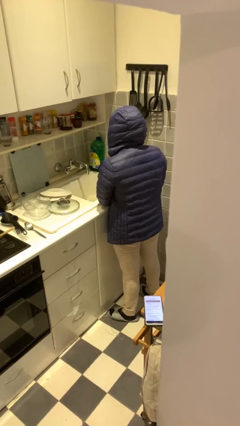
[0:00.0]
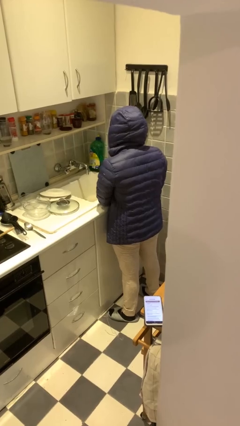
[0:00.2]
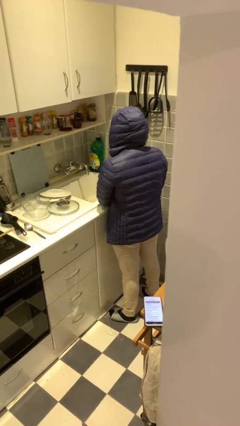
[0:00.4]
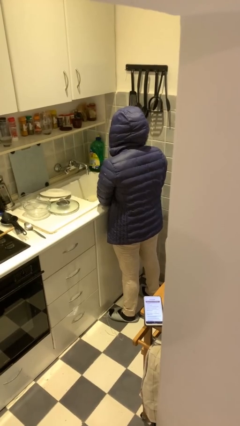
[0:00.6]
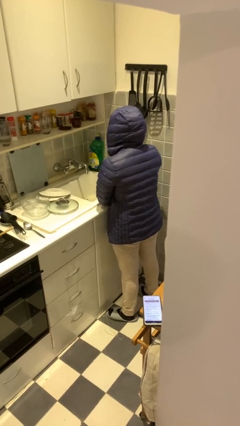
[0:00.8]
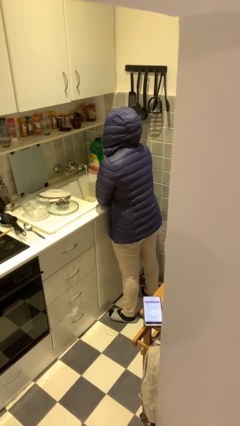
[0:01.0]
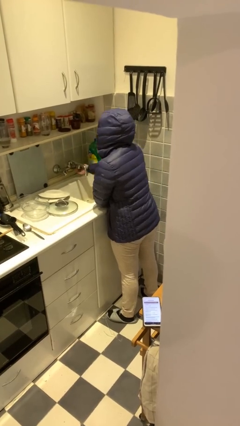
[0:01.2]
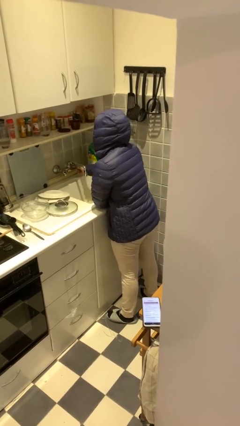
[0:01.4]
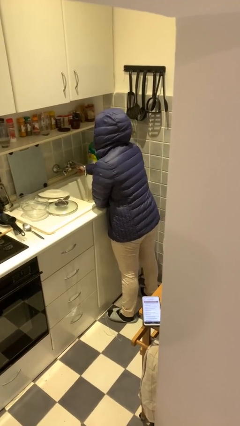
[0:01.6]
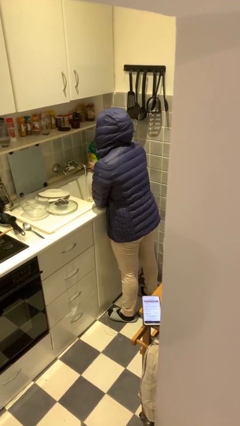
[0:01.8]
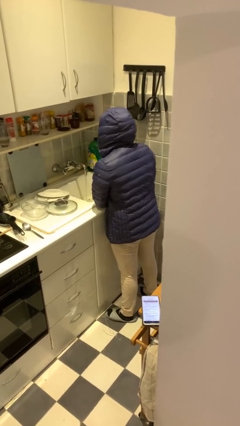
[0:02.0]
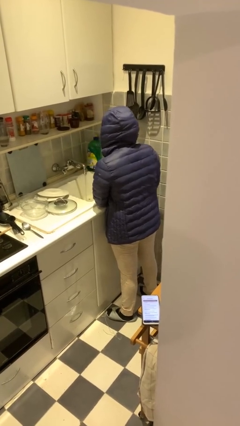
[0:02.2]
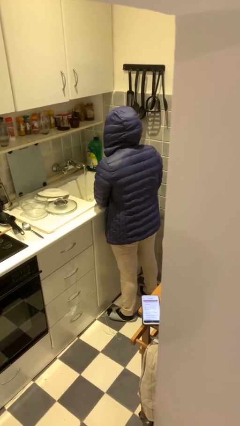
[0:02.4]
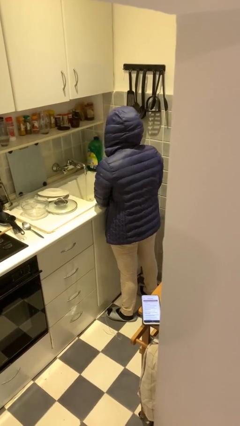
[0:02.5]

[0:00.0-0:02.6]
person turns on faucet

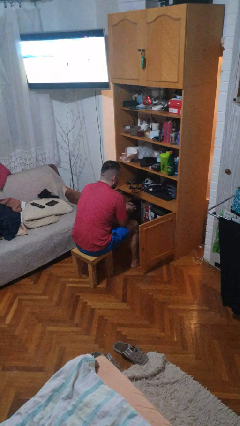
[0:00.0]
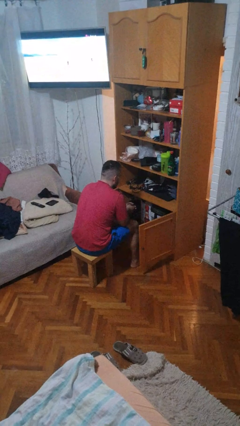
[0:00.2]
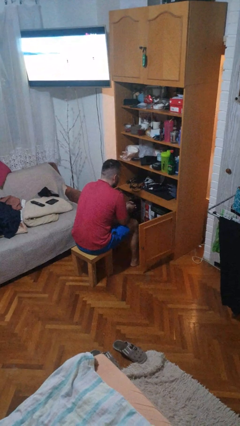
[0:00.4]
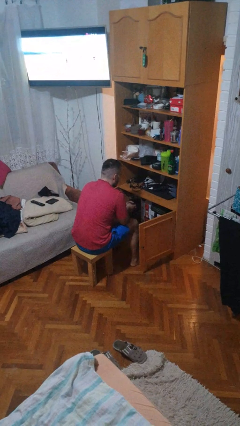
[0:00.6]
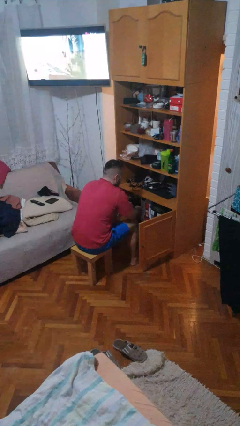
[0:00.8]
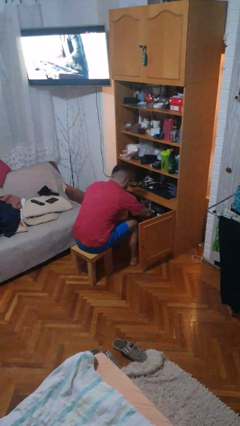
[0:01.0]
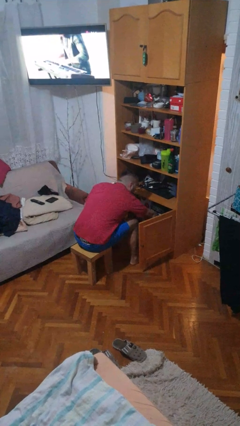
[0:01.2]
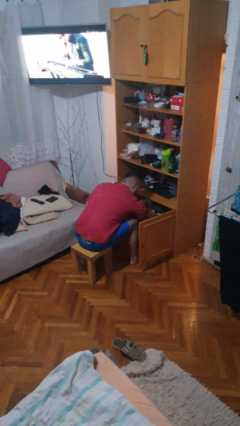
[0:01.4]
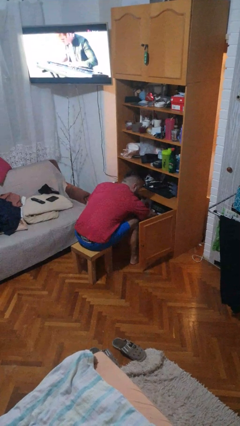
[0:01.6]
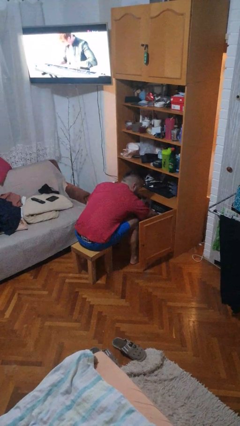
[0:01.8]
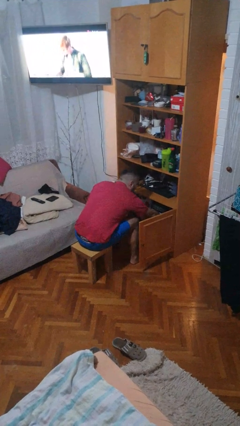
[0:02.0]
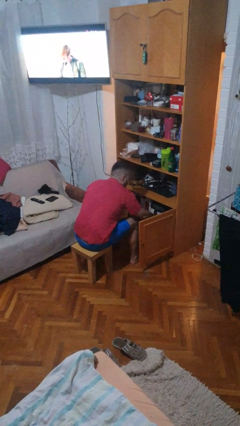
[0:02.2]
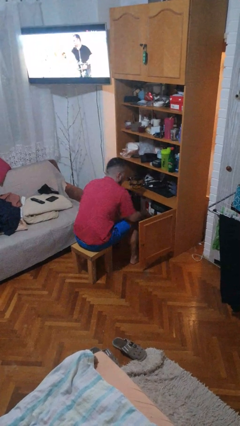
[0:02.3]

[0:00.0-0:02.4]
person searches in cabinet

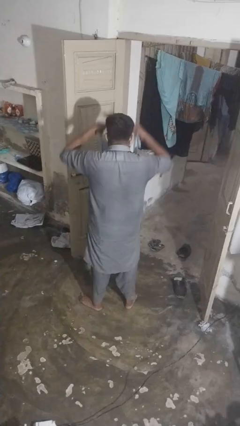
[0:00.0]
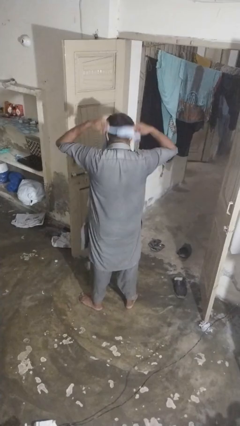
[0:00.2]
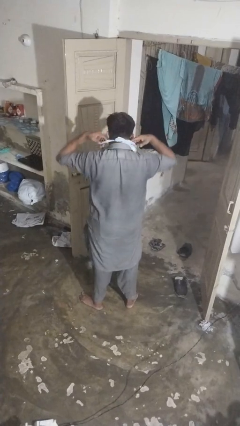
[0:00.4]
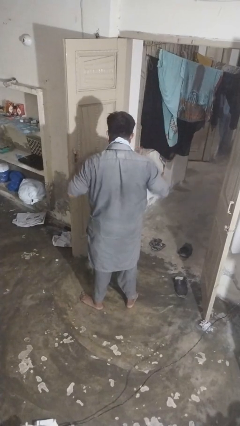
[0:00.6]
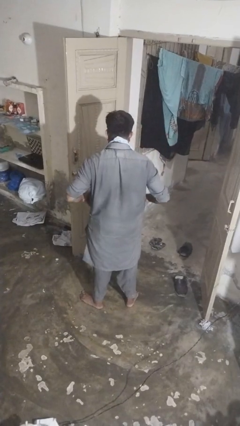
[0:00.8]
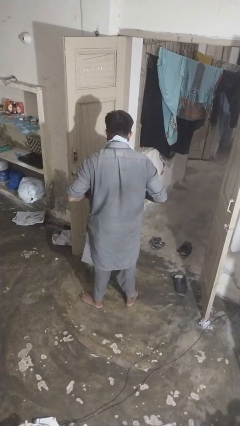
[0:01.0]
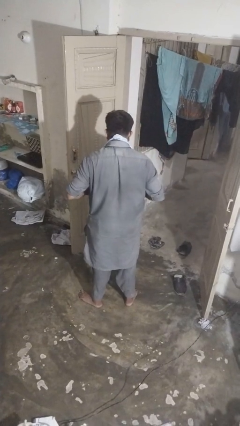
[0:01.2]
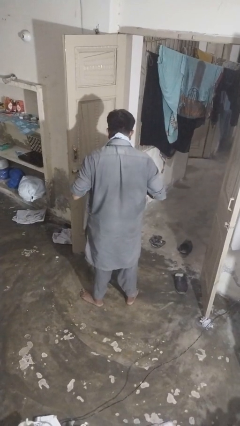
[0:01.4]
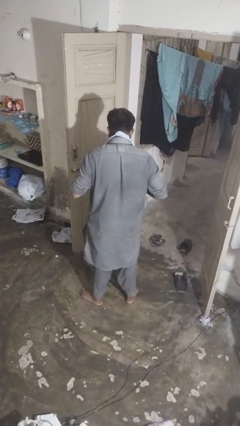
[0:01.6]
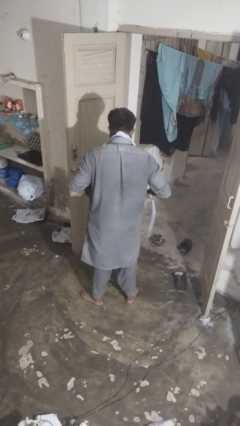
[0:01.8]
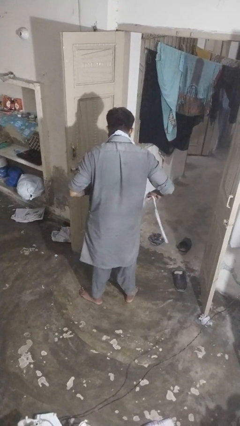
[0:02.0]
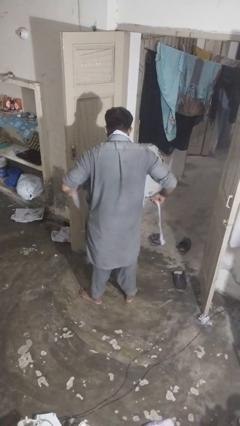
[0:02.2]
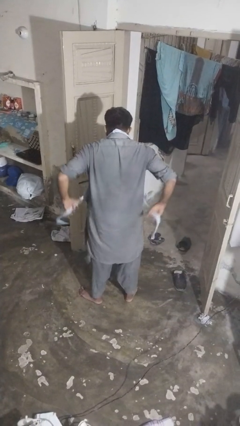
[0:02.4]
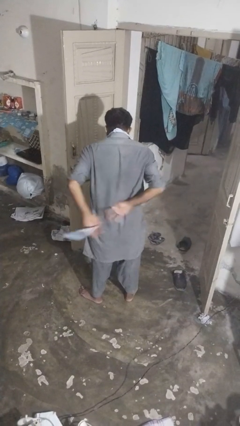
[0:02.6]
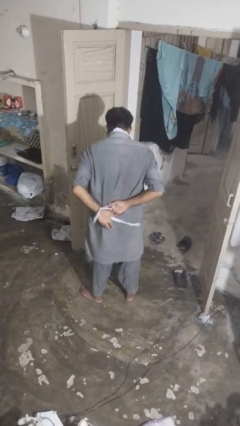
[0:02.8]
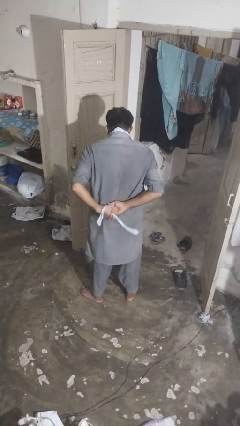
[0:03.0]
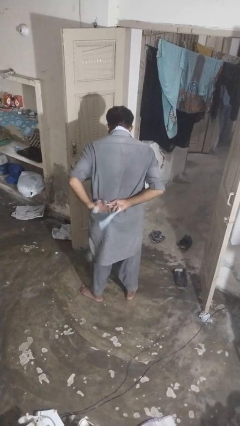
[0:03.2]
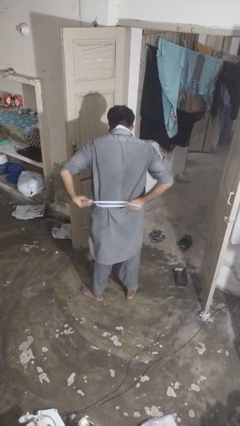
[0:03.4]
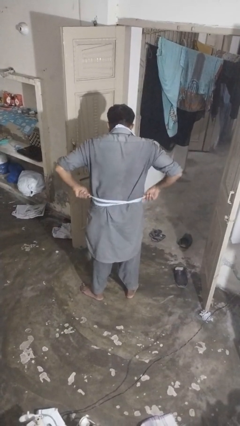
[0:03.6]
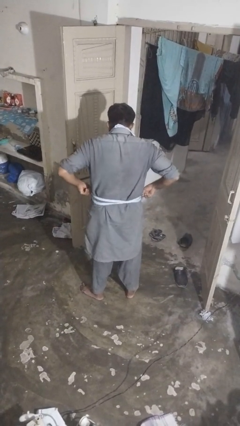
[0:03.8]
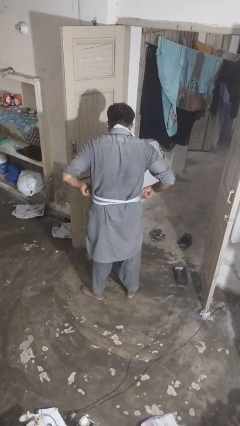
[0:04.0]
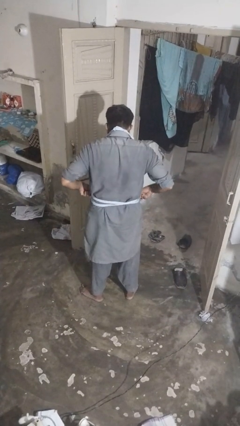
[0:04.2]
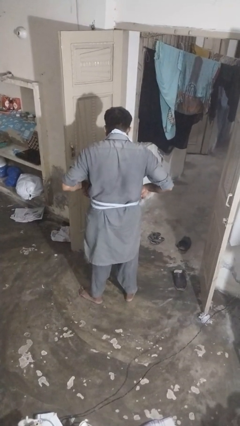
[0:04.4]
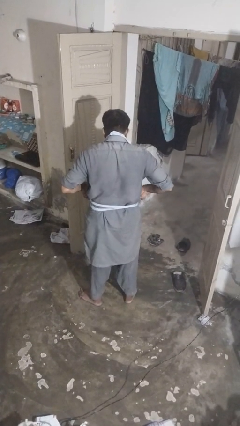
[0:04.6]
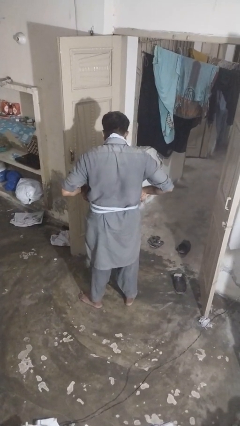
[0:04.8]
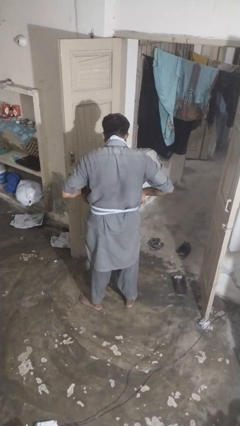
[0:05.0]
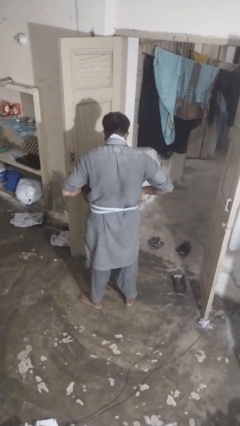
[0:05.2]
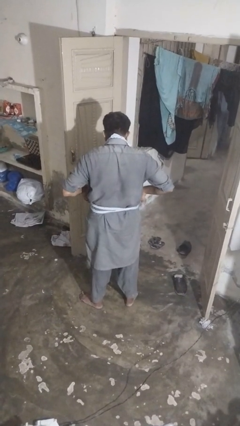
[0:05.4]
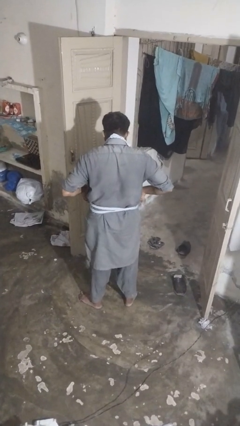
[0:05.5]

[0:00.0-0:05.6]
person puts on apron

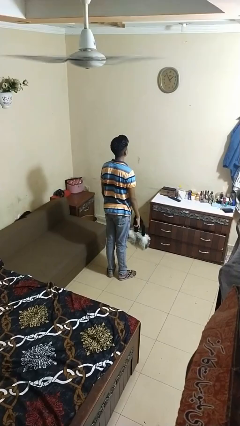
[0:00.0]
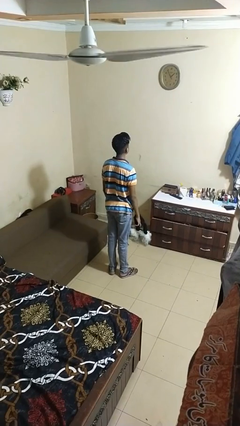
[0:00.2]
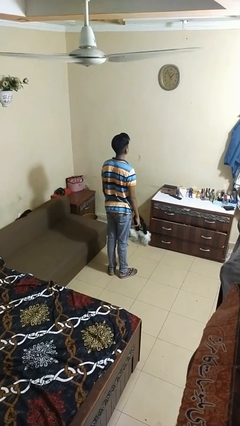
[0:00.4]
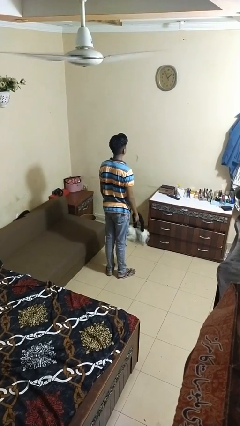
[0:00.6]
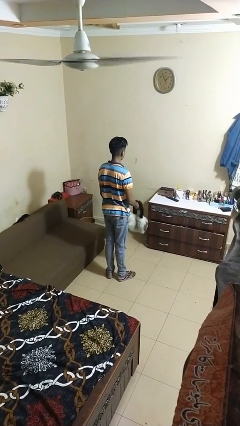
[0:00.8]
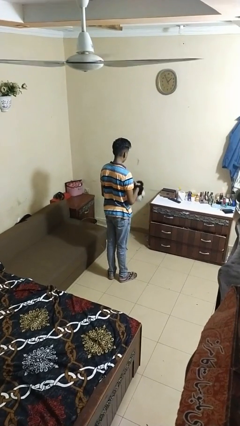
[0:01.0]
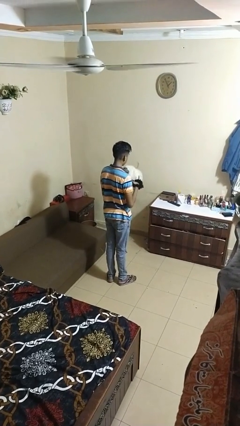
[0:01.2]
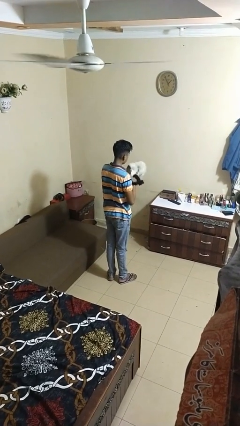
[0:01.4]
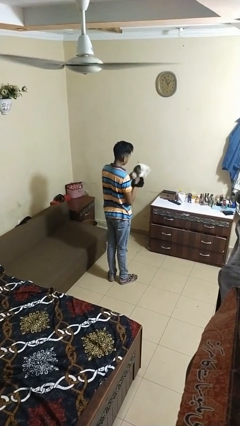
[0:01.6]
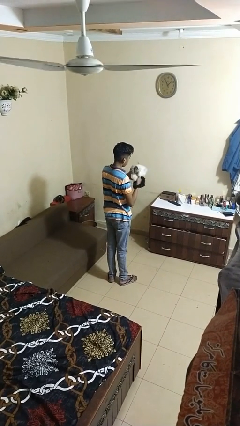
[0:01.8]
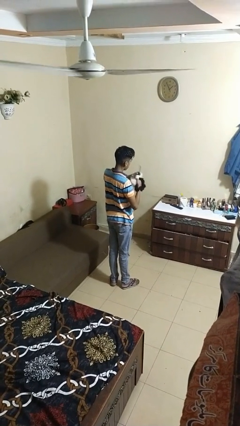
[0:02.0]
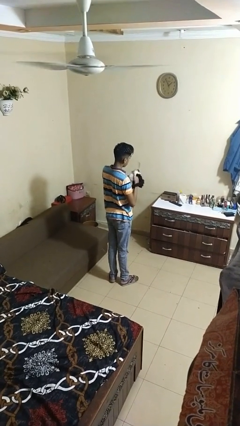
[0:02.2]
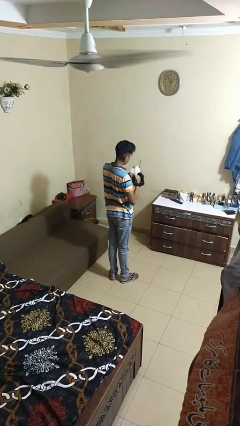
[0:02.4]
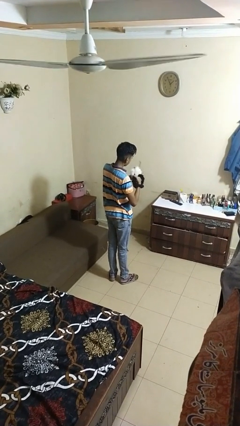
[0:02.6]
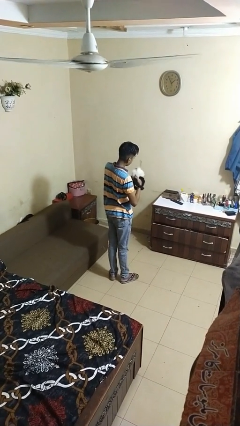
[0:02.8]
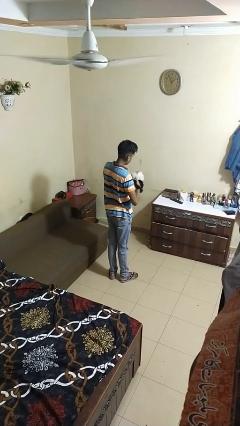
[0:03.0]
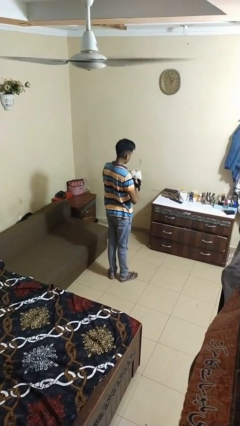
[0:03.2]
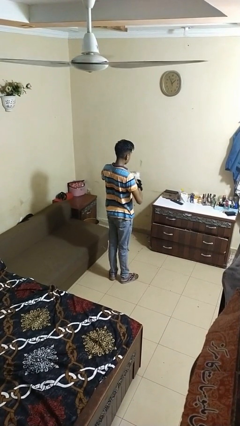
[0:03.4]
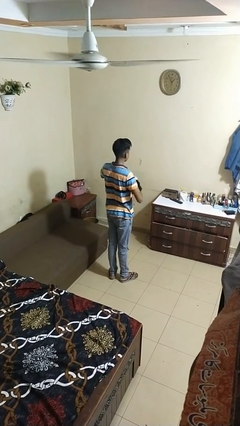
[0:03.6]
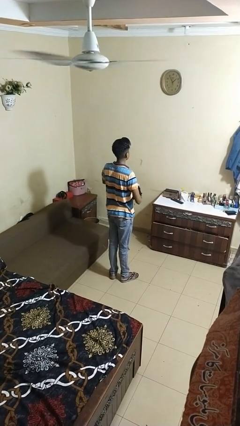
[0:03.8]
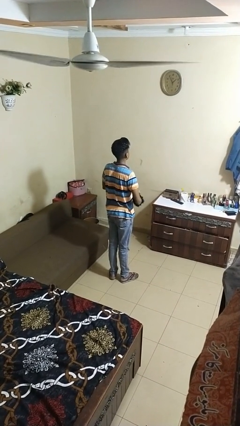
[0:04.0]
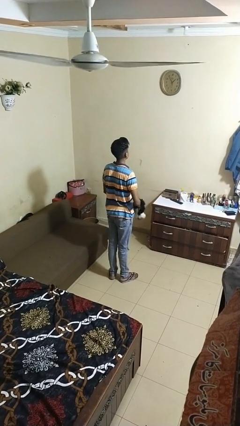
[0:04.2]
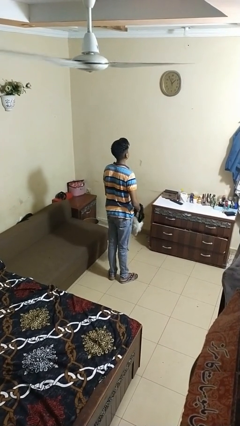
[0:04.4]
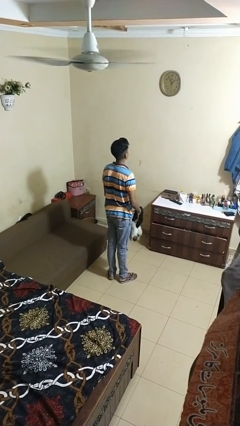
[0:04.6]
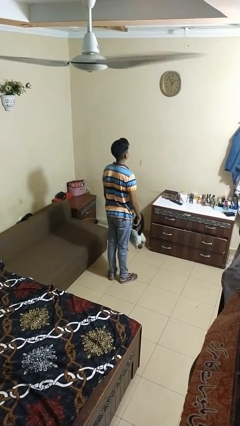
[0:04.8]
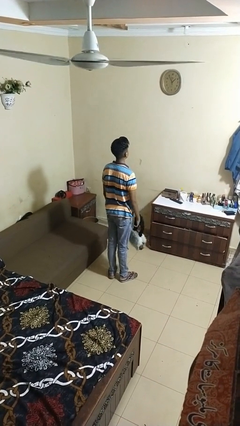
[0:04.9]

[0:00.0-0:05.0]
person squeezes object

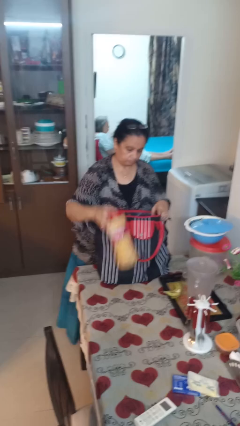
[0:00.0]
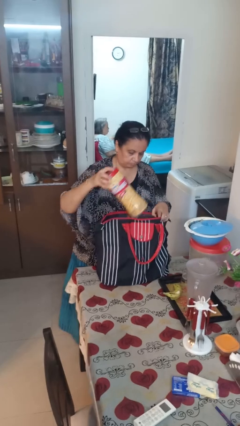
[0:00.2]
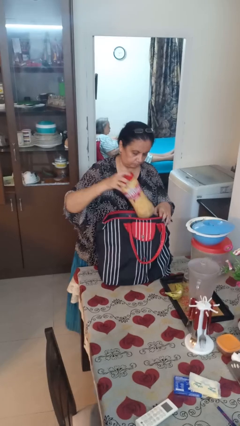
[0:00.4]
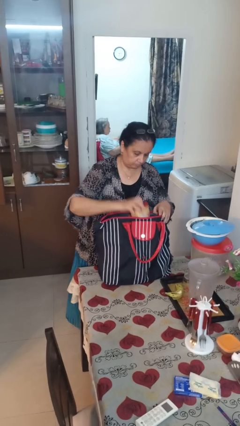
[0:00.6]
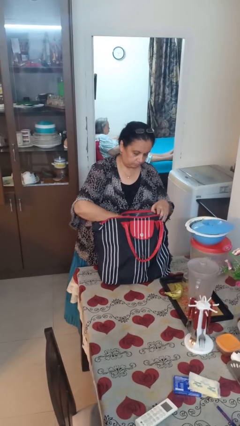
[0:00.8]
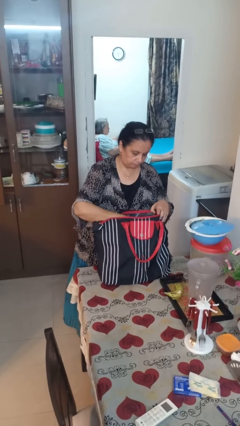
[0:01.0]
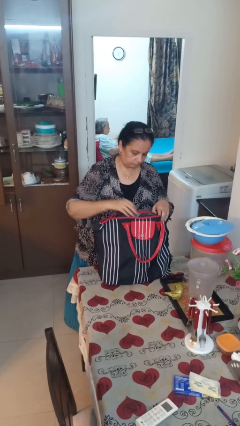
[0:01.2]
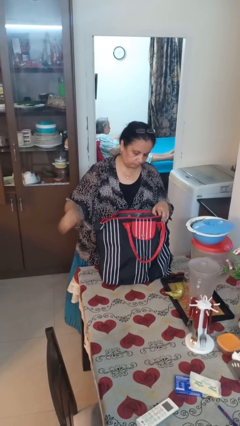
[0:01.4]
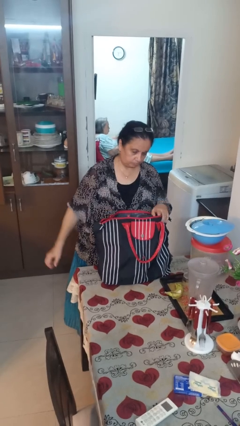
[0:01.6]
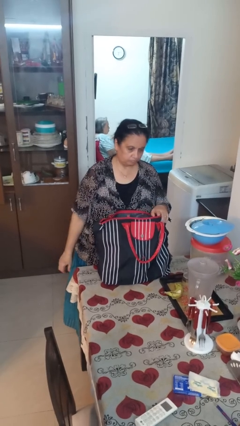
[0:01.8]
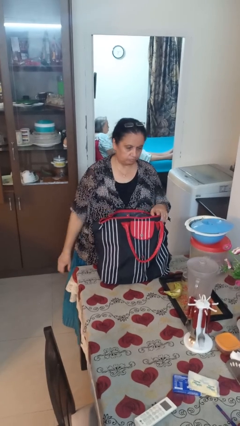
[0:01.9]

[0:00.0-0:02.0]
person puts object into bag
